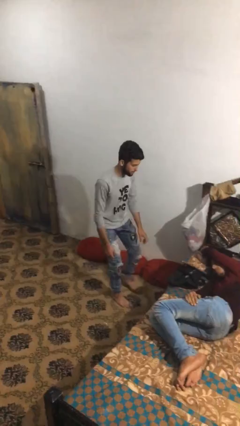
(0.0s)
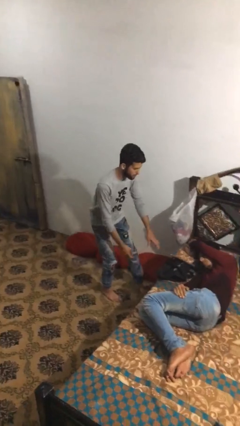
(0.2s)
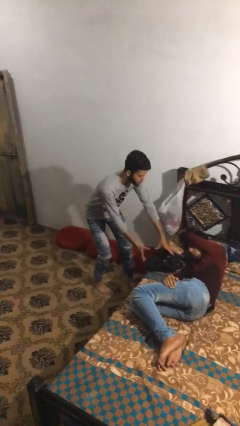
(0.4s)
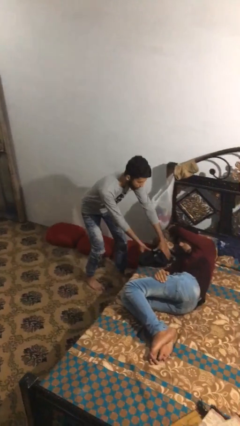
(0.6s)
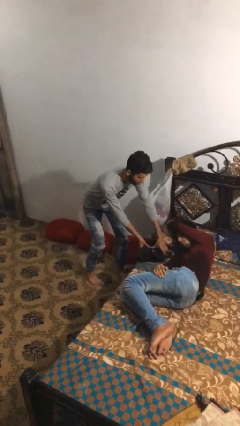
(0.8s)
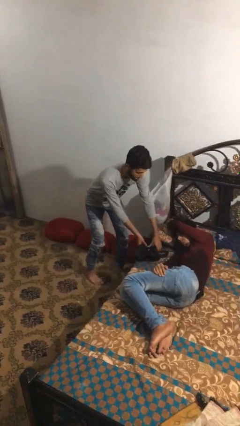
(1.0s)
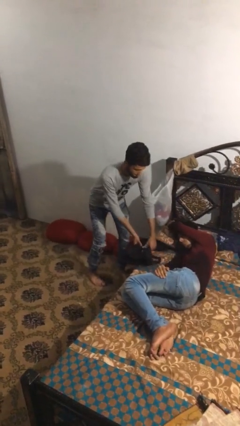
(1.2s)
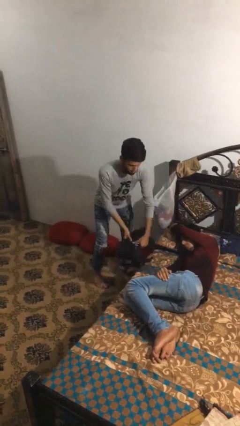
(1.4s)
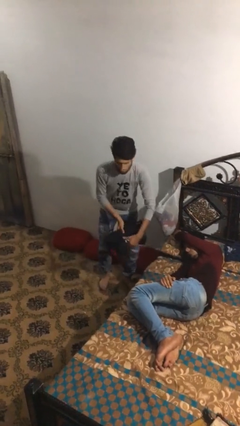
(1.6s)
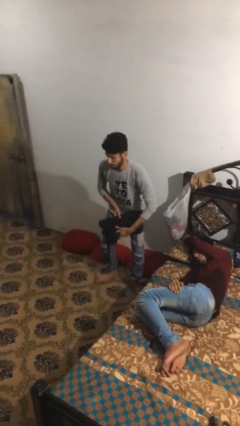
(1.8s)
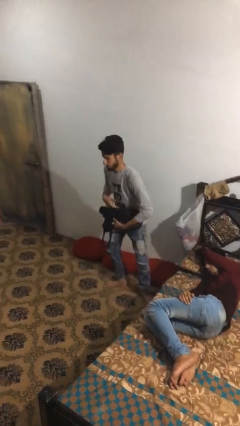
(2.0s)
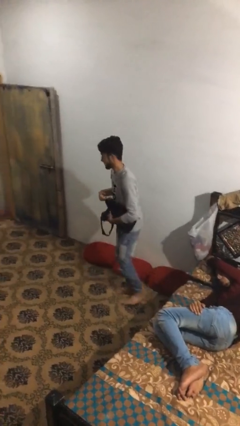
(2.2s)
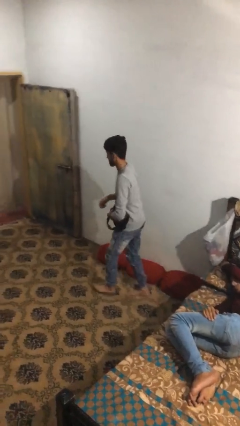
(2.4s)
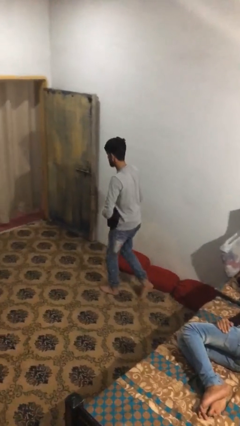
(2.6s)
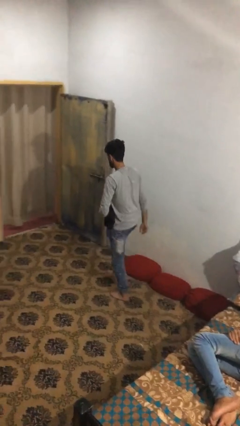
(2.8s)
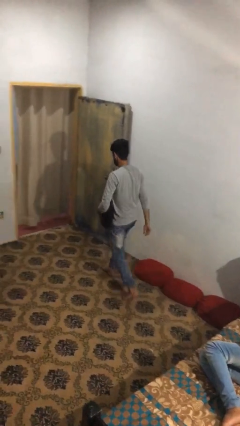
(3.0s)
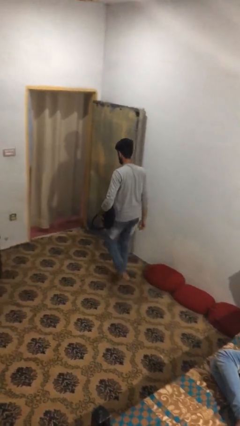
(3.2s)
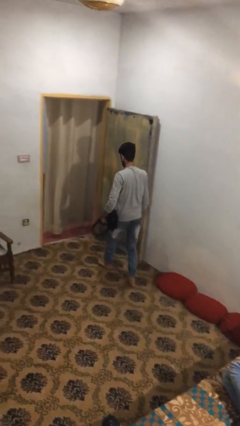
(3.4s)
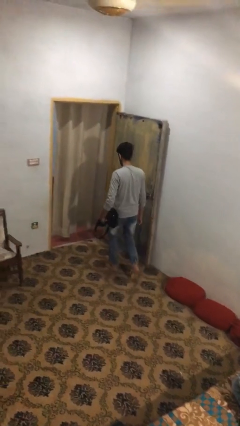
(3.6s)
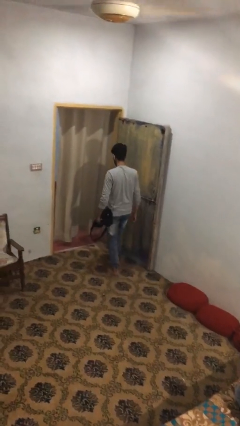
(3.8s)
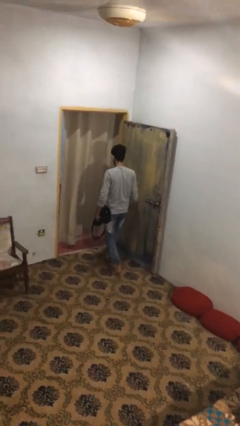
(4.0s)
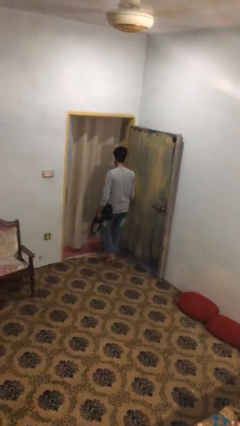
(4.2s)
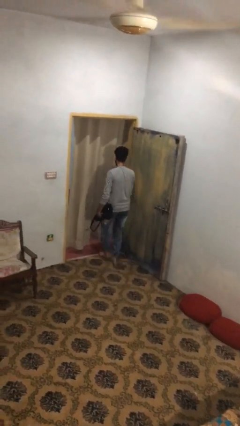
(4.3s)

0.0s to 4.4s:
person steals object from person

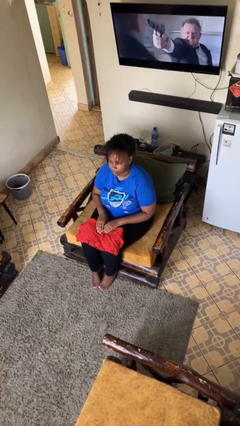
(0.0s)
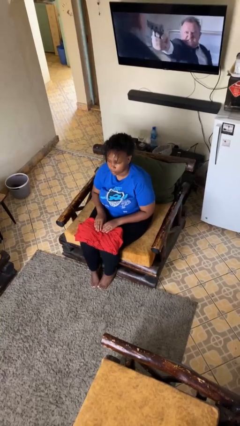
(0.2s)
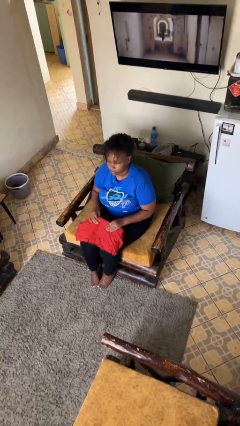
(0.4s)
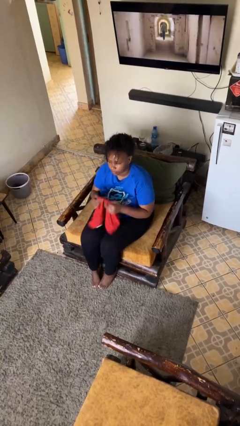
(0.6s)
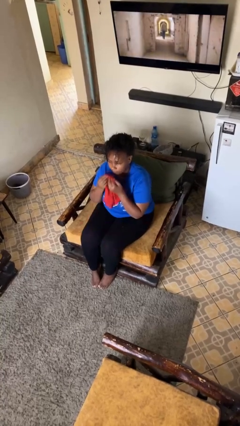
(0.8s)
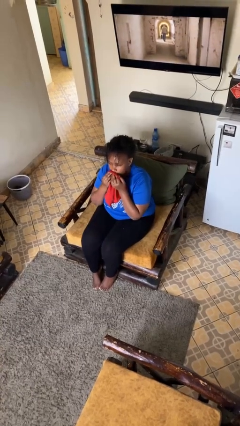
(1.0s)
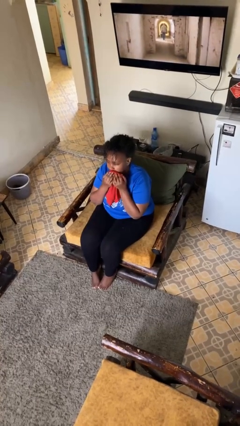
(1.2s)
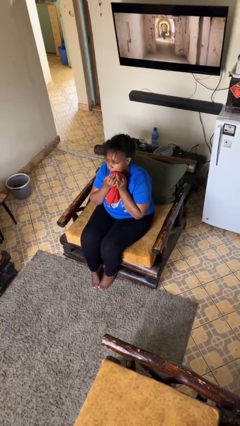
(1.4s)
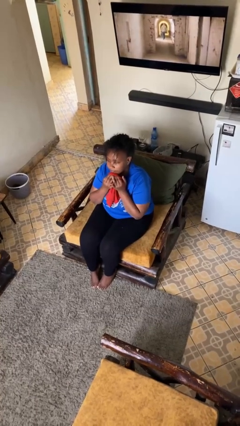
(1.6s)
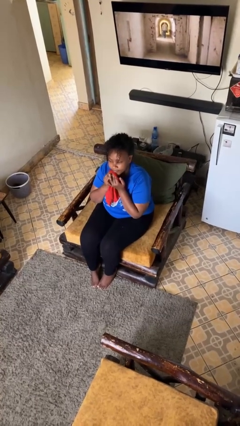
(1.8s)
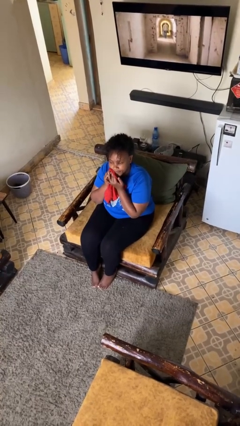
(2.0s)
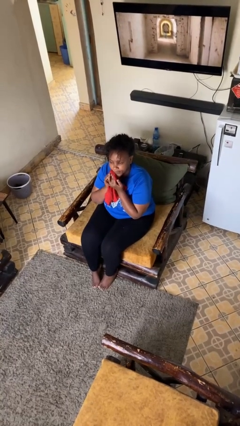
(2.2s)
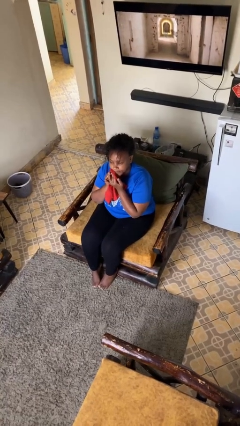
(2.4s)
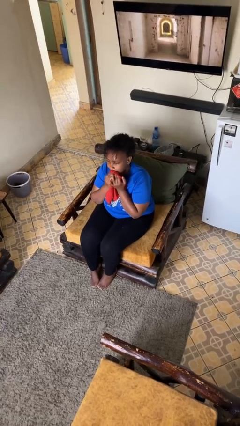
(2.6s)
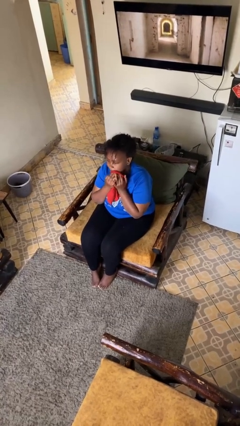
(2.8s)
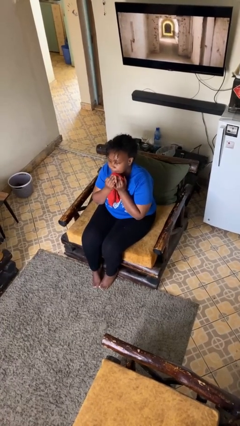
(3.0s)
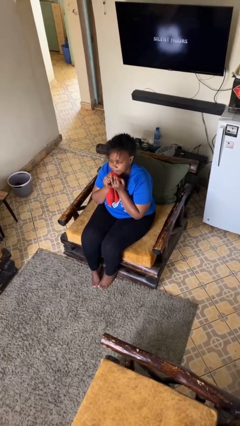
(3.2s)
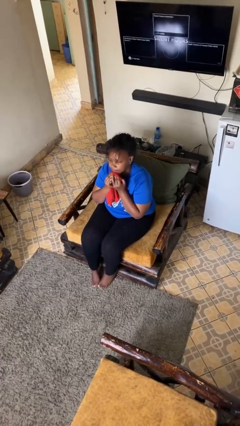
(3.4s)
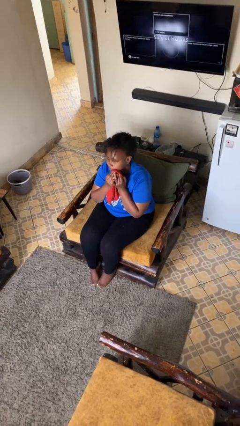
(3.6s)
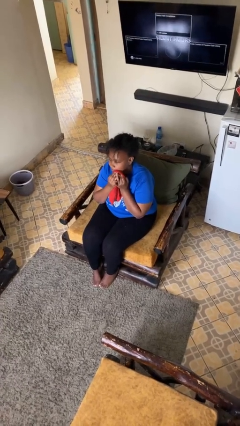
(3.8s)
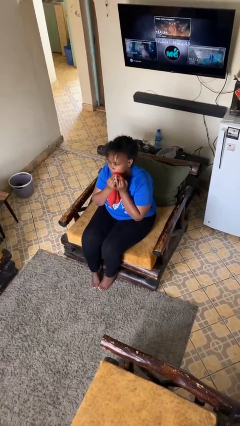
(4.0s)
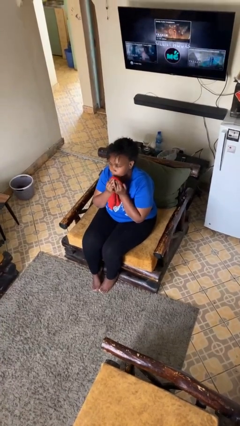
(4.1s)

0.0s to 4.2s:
person wipes mouth with napkin

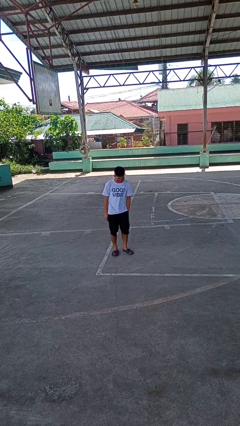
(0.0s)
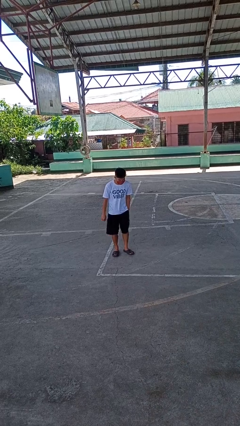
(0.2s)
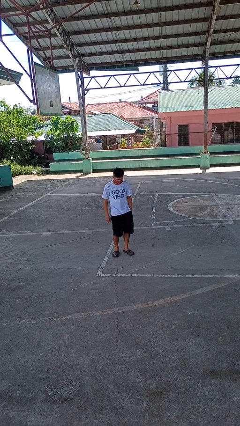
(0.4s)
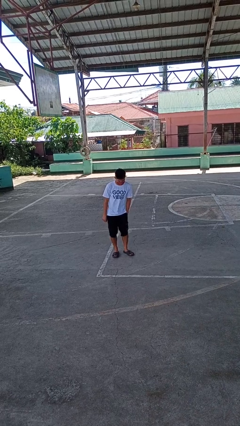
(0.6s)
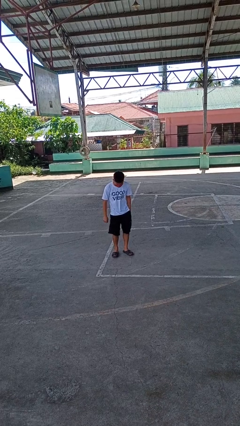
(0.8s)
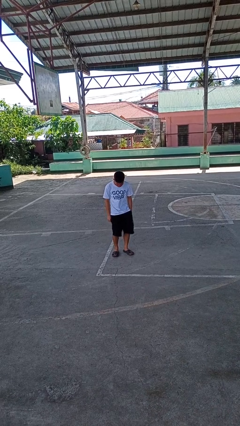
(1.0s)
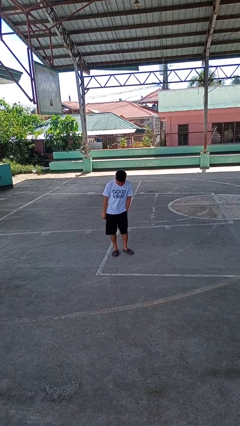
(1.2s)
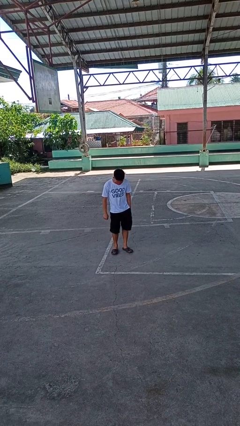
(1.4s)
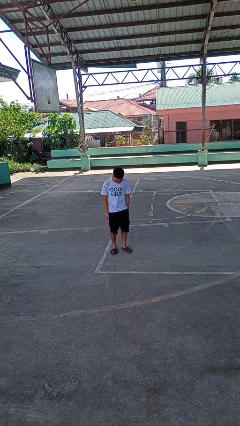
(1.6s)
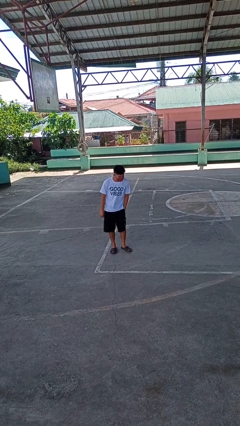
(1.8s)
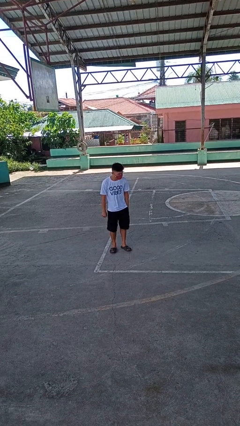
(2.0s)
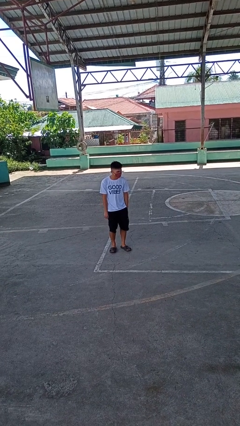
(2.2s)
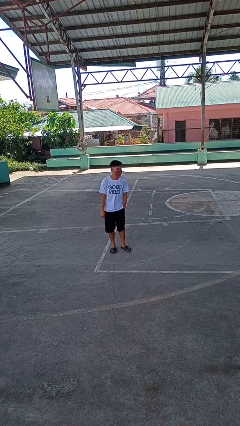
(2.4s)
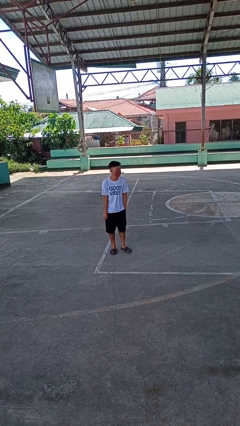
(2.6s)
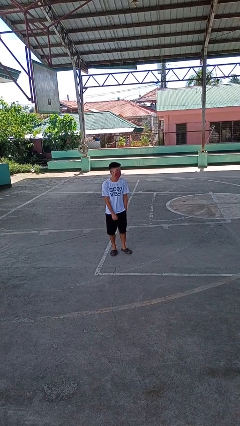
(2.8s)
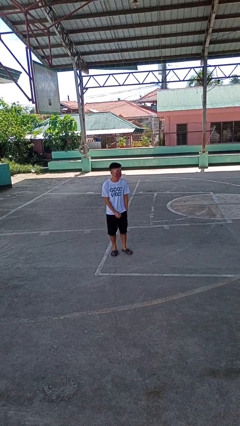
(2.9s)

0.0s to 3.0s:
person wiggles hips

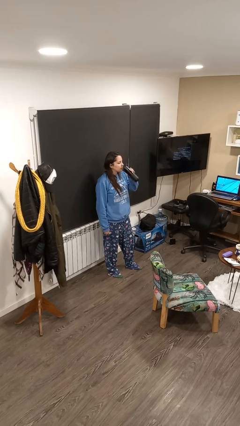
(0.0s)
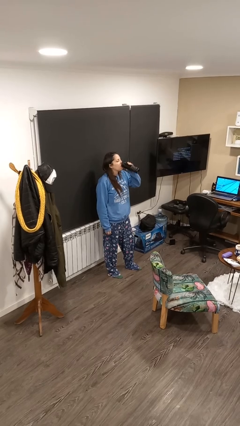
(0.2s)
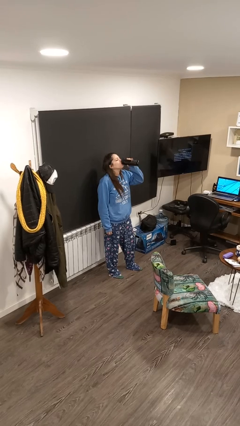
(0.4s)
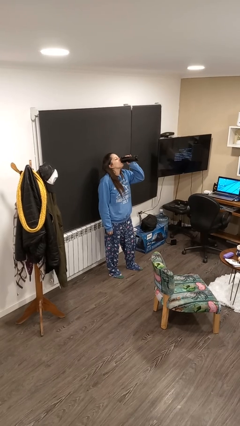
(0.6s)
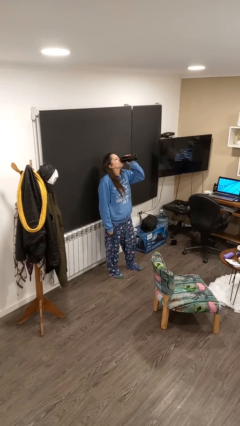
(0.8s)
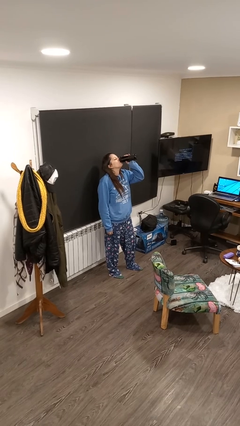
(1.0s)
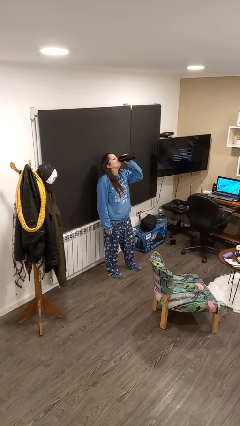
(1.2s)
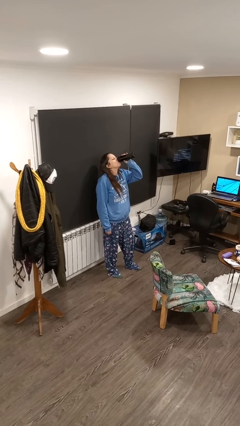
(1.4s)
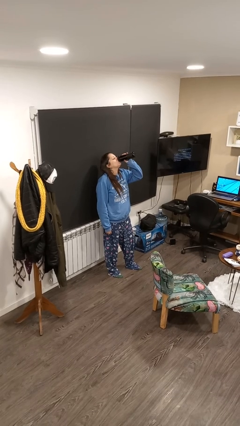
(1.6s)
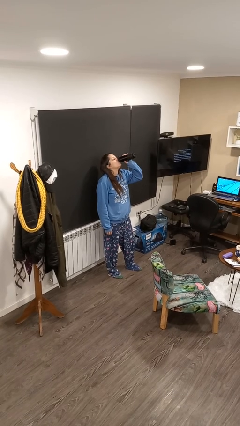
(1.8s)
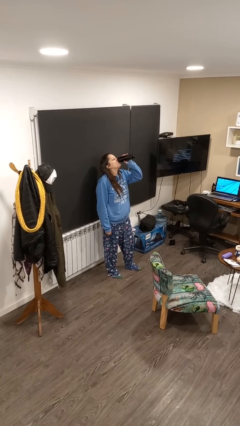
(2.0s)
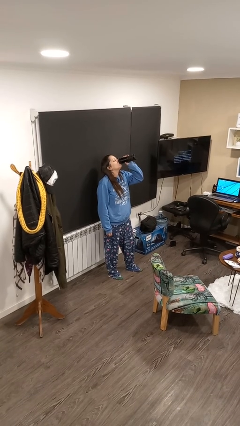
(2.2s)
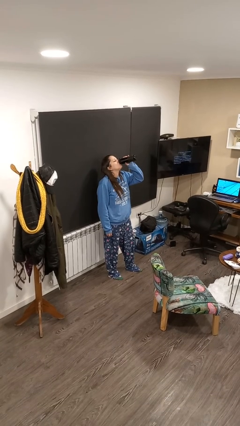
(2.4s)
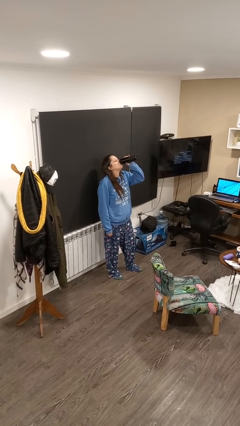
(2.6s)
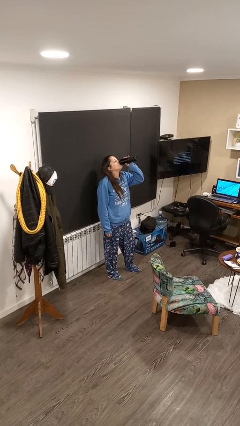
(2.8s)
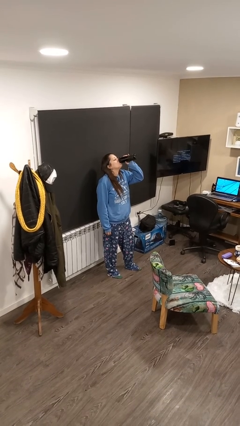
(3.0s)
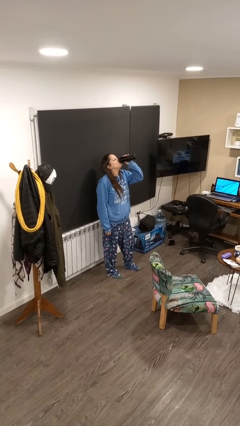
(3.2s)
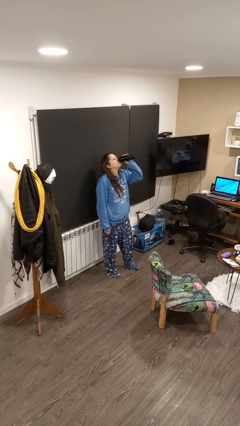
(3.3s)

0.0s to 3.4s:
person drinks from bottle

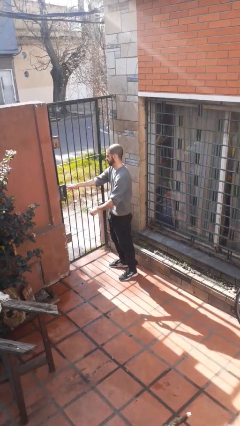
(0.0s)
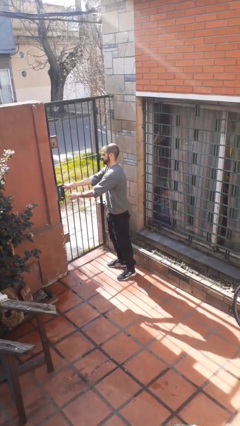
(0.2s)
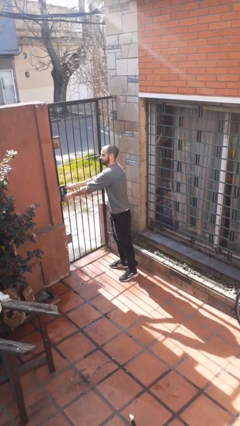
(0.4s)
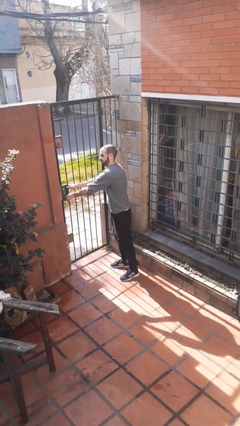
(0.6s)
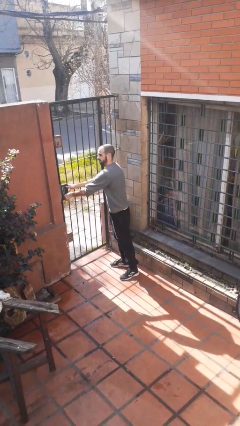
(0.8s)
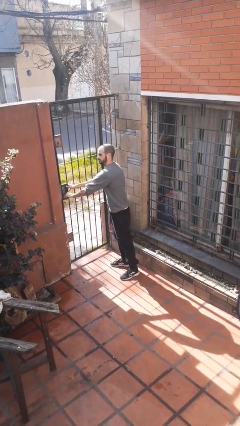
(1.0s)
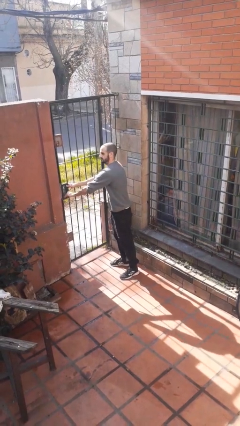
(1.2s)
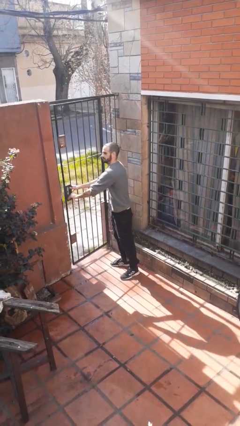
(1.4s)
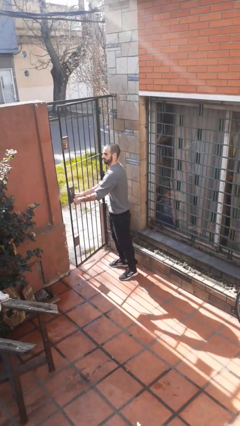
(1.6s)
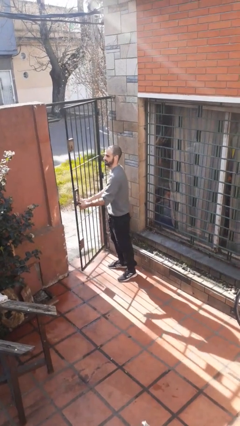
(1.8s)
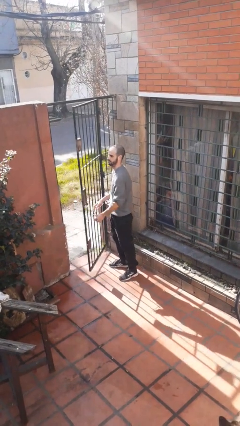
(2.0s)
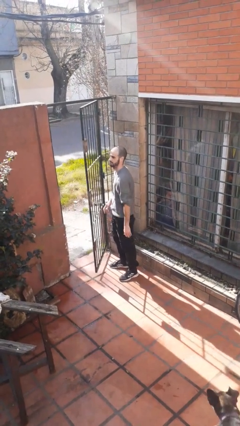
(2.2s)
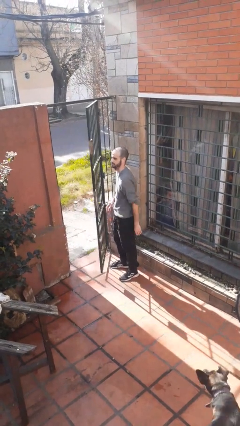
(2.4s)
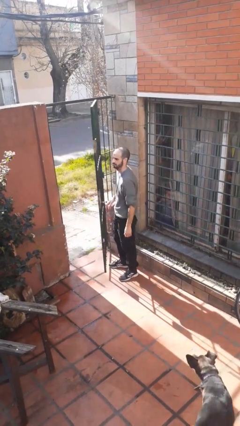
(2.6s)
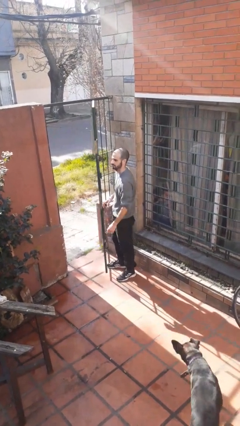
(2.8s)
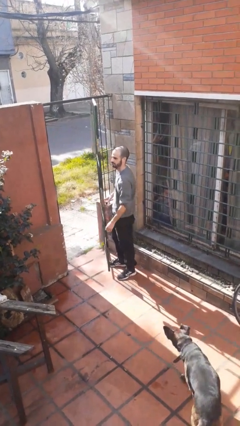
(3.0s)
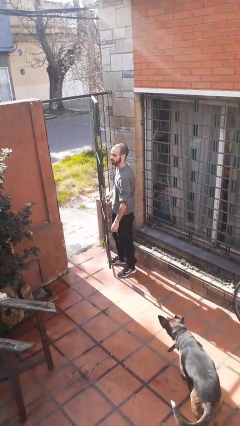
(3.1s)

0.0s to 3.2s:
person opens gate
